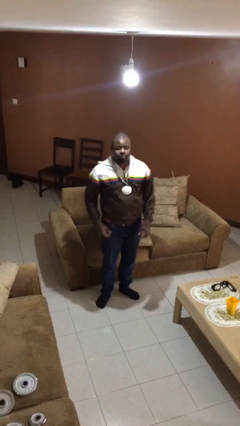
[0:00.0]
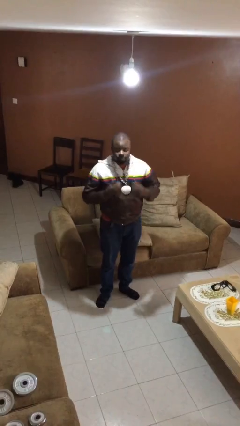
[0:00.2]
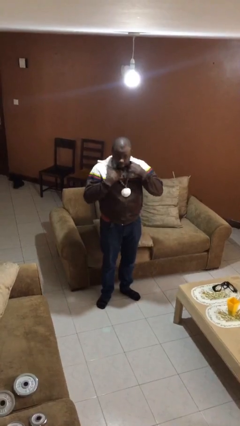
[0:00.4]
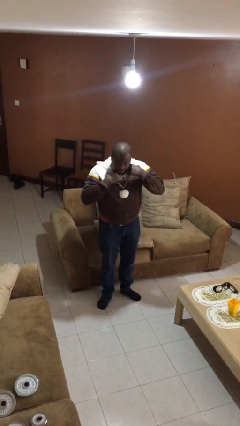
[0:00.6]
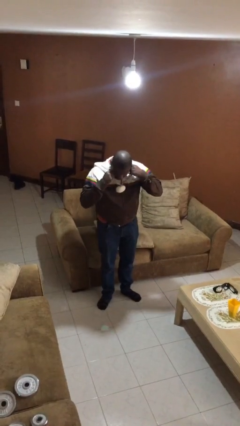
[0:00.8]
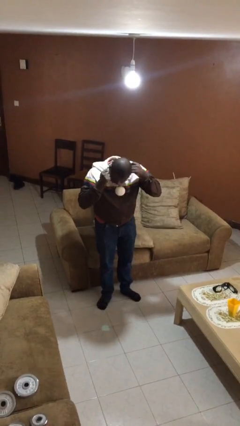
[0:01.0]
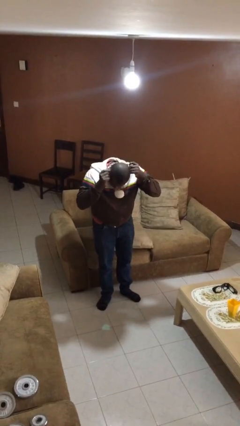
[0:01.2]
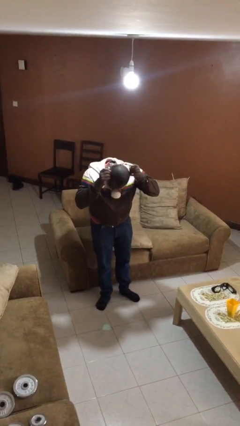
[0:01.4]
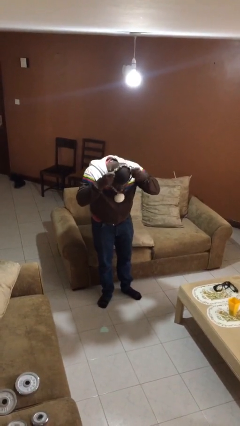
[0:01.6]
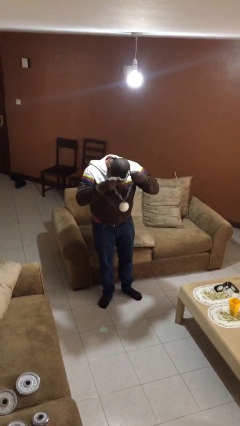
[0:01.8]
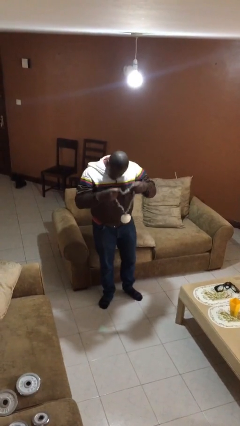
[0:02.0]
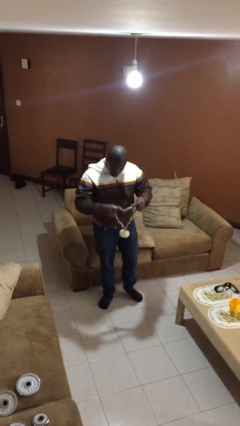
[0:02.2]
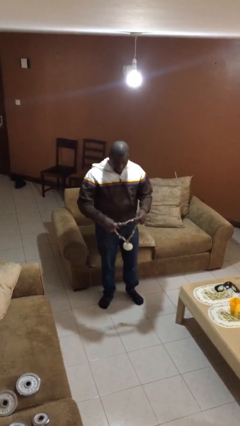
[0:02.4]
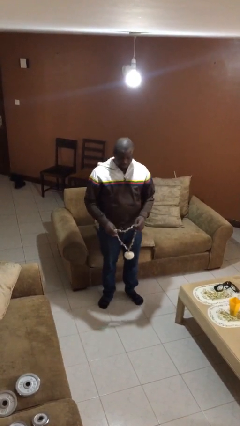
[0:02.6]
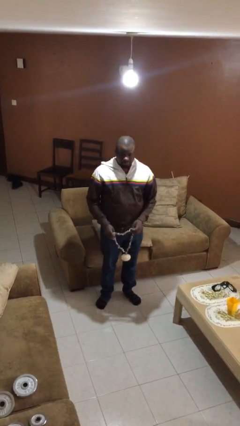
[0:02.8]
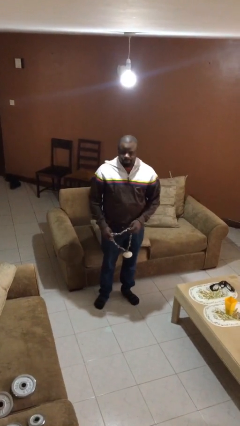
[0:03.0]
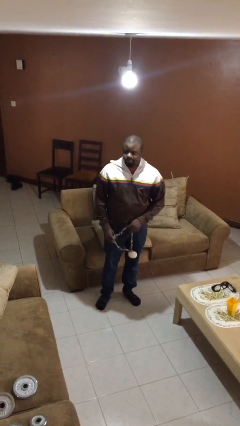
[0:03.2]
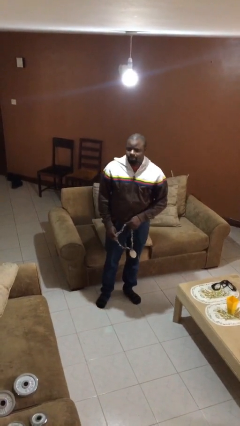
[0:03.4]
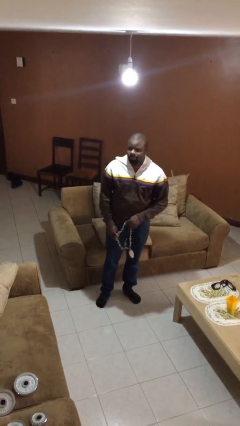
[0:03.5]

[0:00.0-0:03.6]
person takes off necklace

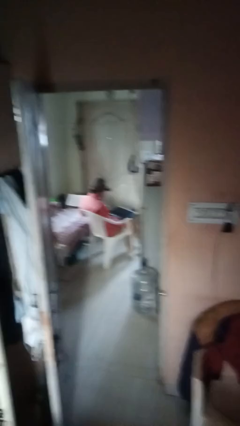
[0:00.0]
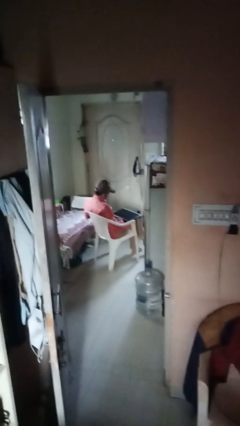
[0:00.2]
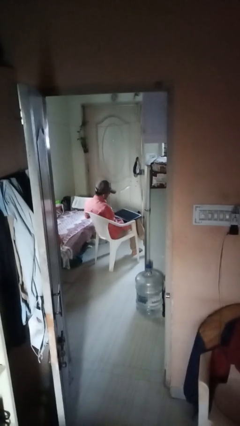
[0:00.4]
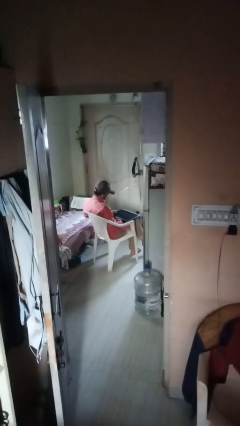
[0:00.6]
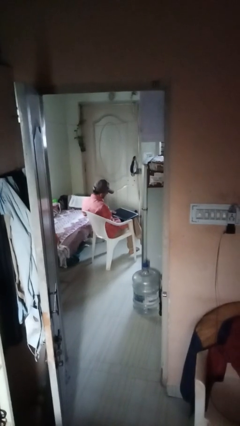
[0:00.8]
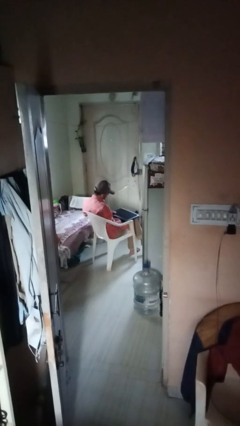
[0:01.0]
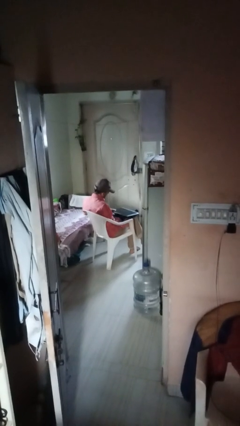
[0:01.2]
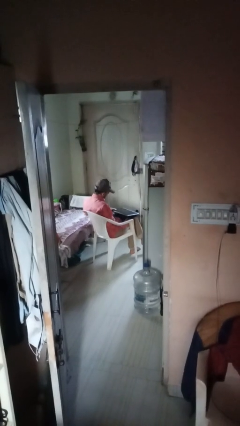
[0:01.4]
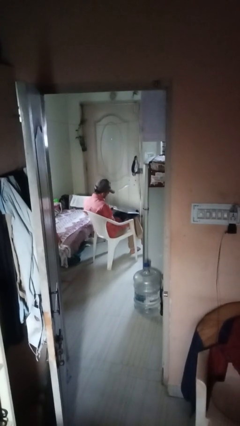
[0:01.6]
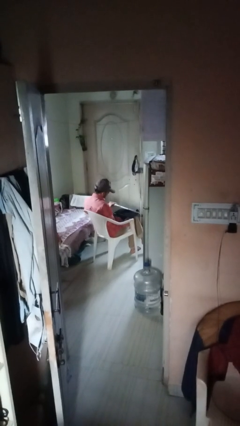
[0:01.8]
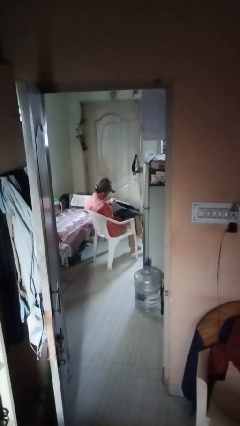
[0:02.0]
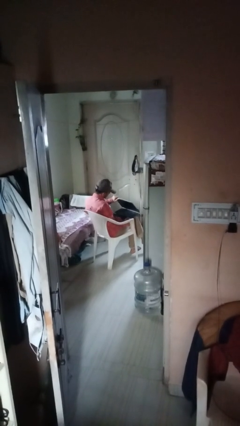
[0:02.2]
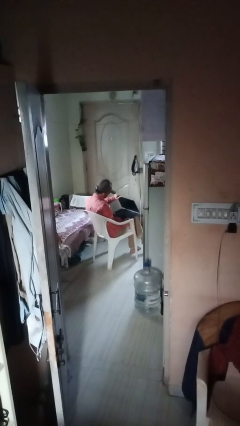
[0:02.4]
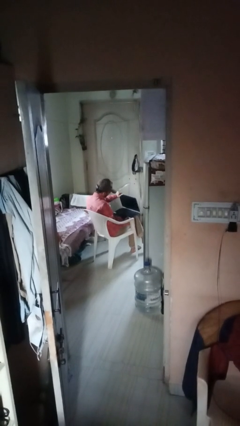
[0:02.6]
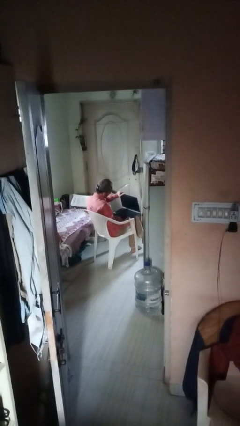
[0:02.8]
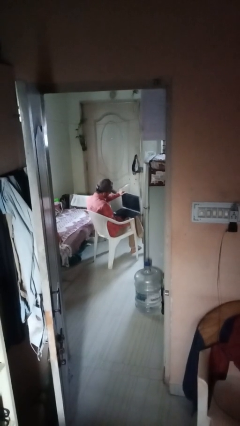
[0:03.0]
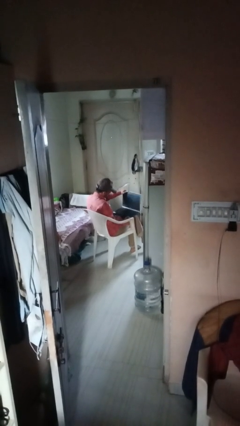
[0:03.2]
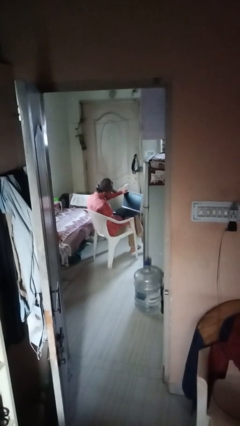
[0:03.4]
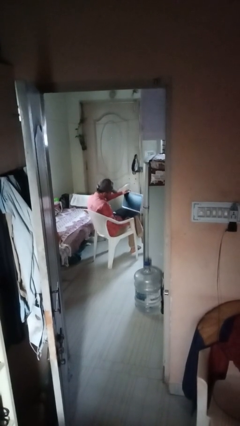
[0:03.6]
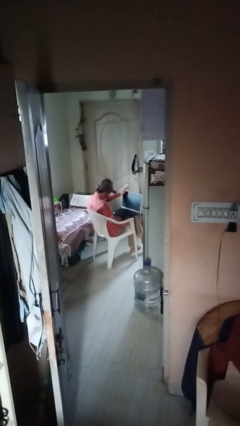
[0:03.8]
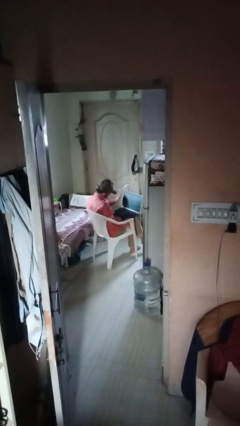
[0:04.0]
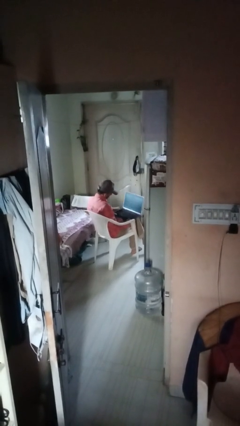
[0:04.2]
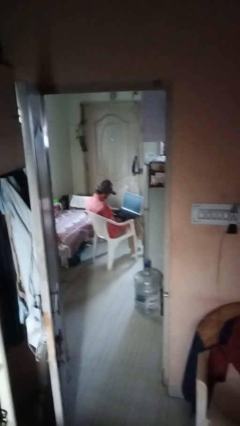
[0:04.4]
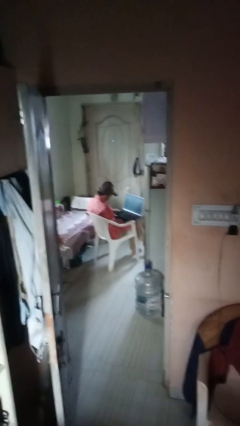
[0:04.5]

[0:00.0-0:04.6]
person opens laptop

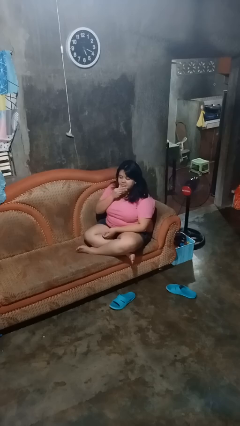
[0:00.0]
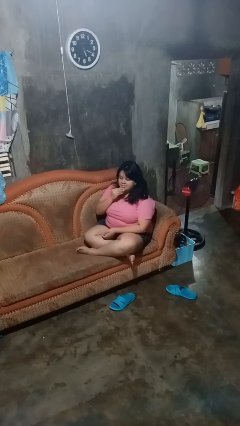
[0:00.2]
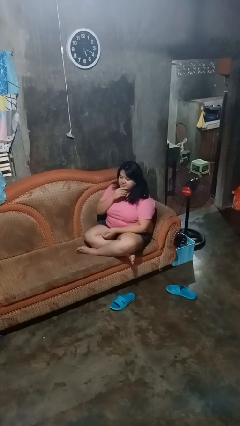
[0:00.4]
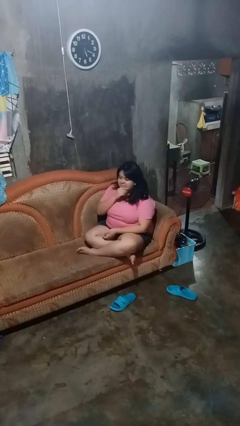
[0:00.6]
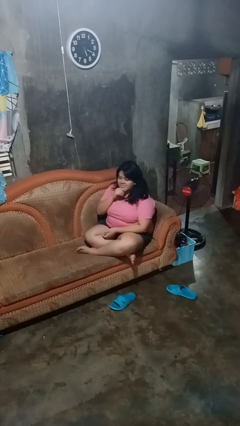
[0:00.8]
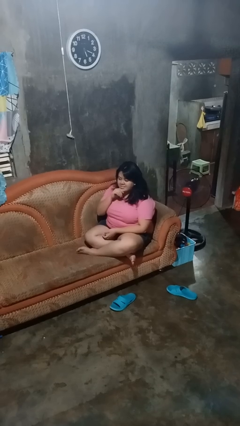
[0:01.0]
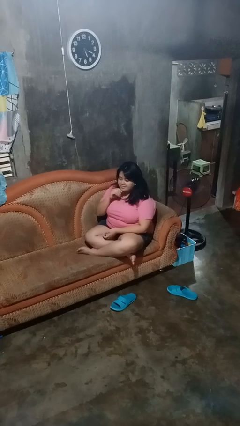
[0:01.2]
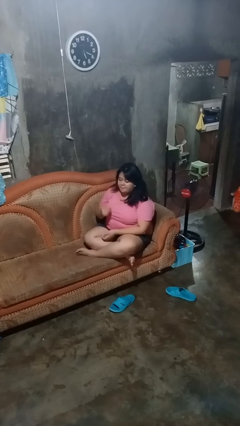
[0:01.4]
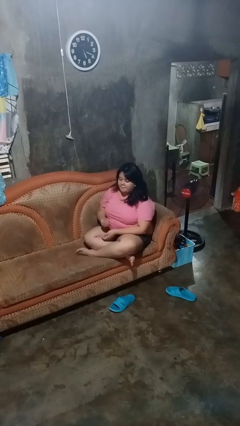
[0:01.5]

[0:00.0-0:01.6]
person strokes chin

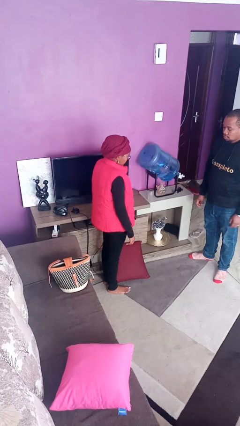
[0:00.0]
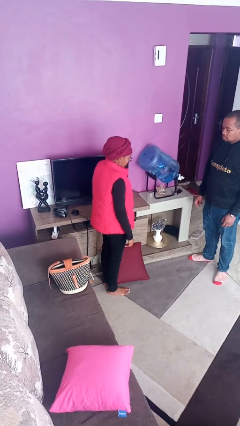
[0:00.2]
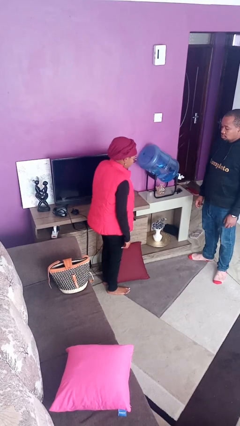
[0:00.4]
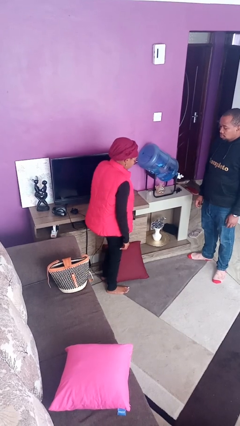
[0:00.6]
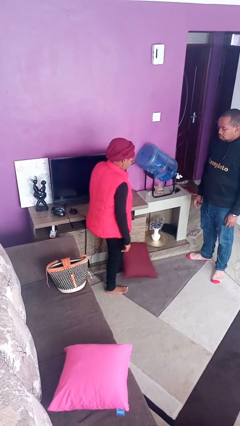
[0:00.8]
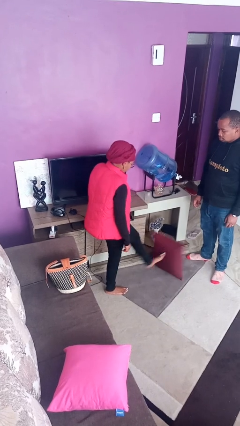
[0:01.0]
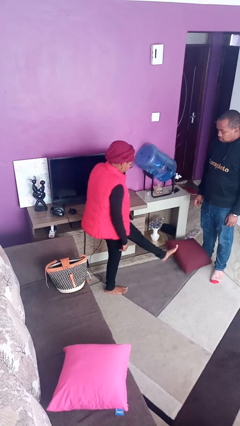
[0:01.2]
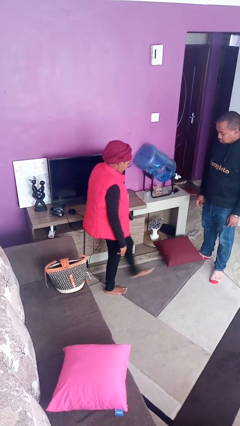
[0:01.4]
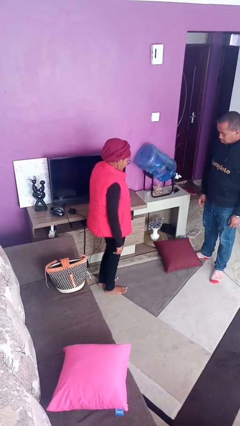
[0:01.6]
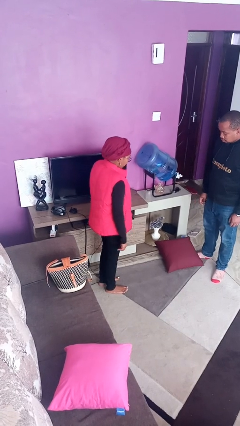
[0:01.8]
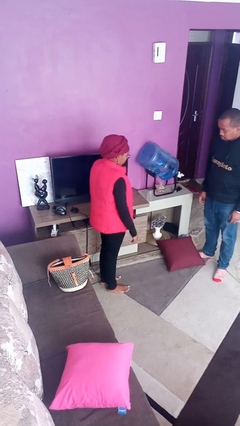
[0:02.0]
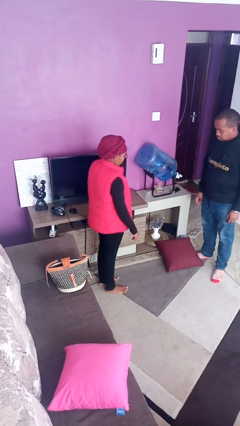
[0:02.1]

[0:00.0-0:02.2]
person kicks object to person

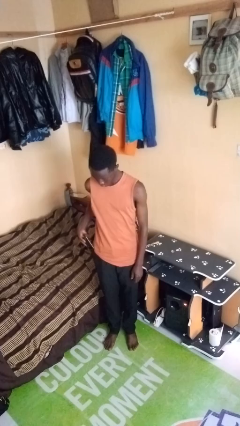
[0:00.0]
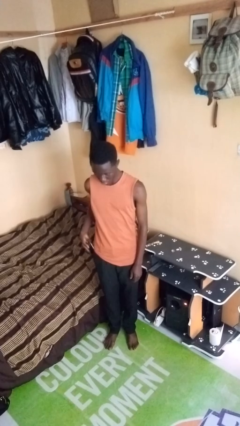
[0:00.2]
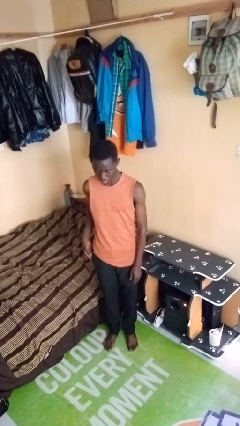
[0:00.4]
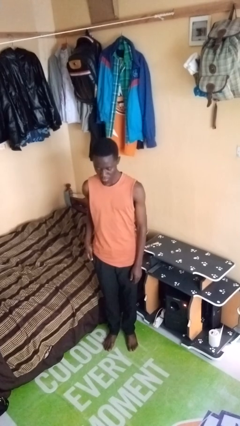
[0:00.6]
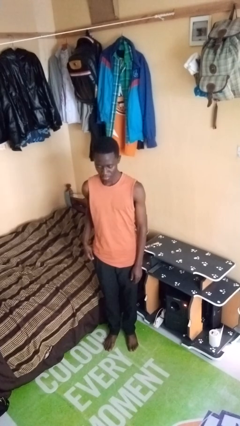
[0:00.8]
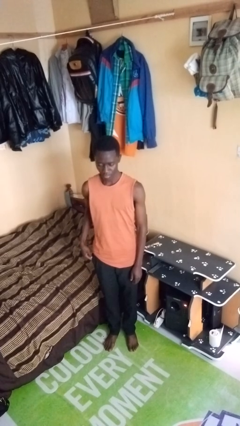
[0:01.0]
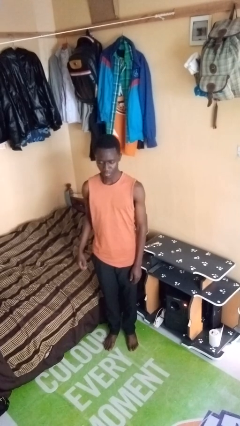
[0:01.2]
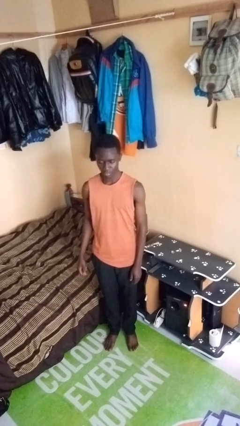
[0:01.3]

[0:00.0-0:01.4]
person puts phone into pocket

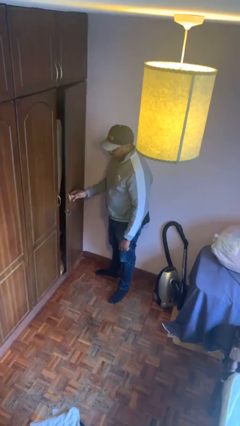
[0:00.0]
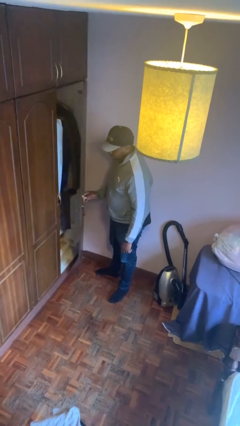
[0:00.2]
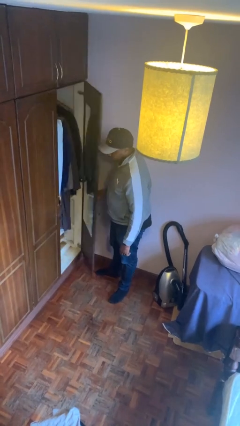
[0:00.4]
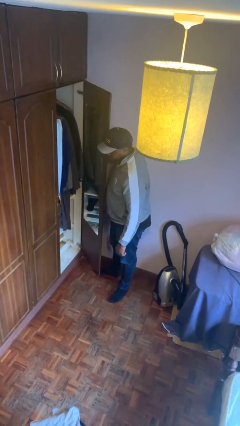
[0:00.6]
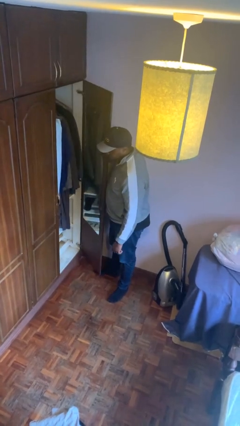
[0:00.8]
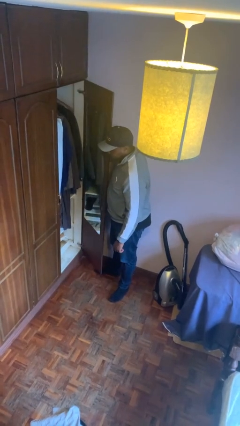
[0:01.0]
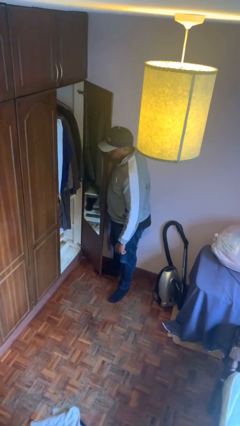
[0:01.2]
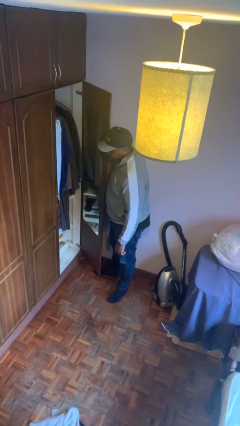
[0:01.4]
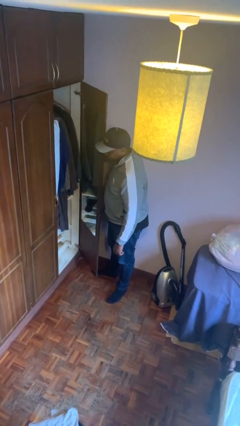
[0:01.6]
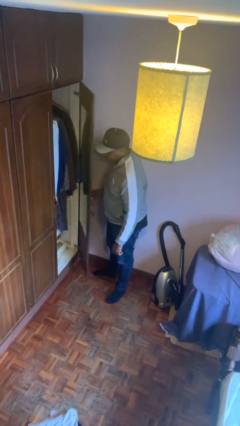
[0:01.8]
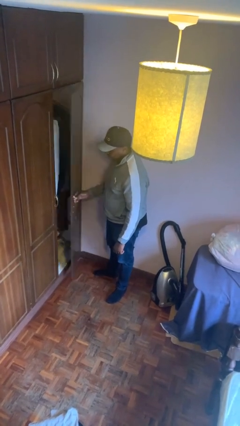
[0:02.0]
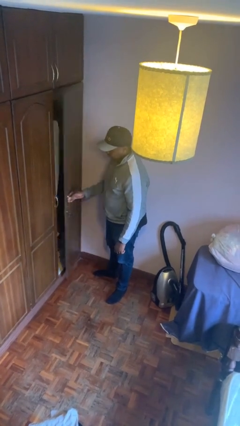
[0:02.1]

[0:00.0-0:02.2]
person opens closet door

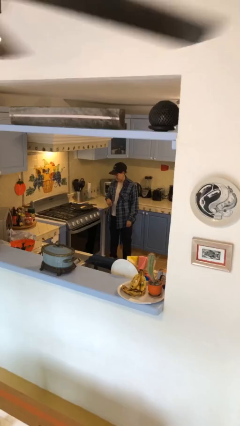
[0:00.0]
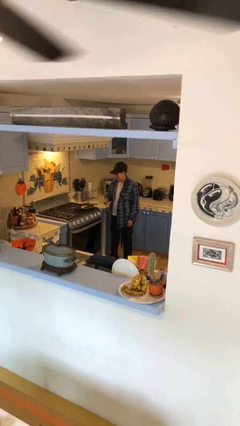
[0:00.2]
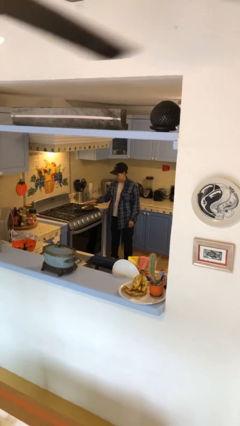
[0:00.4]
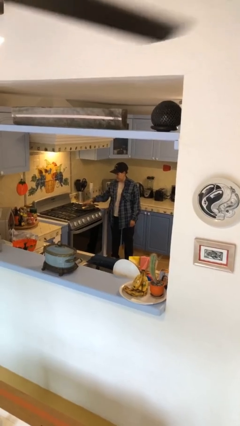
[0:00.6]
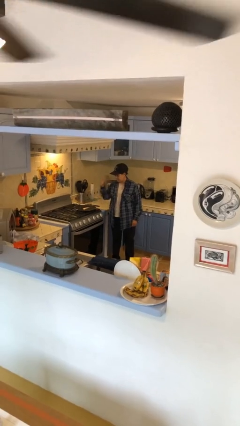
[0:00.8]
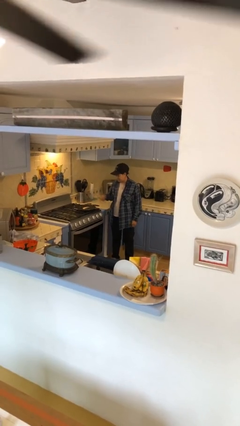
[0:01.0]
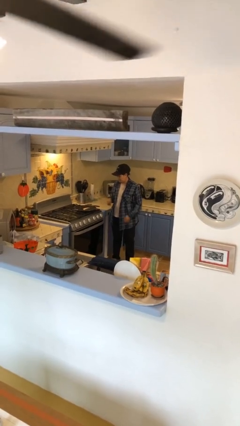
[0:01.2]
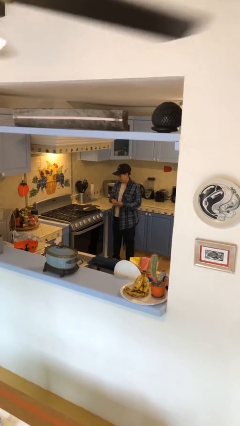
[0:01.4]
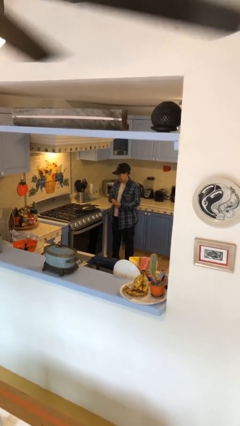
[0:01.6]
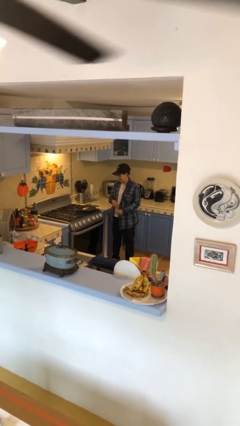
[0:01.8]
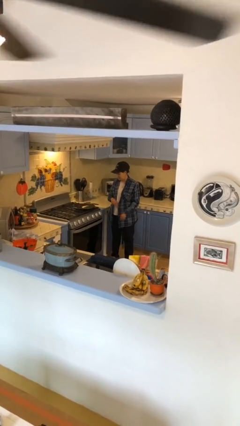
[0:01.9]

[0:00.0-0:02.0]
person burns hand
